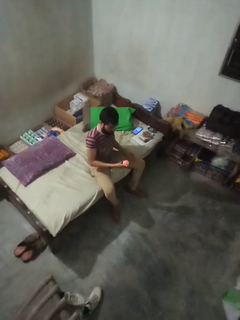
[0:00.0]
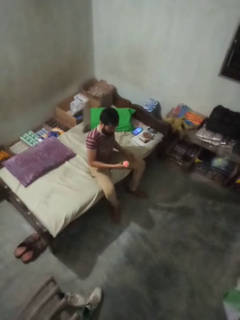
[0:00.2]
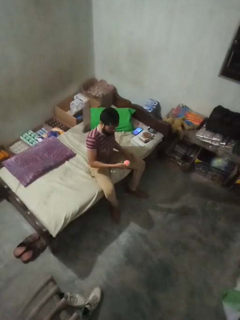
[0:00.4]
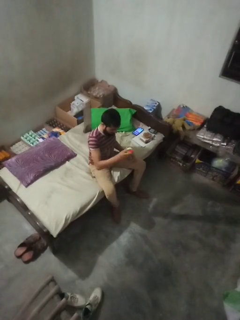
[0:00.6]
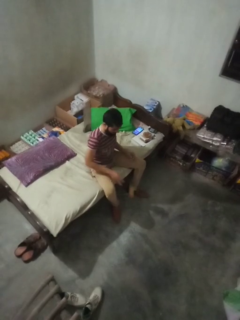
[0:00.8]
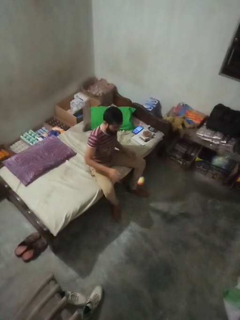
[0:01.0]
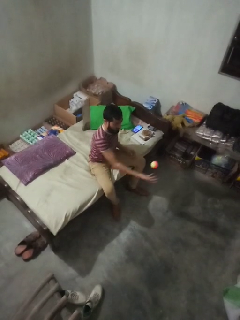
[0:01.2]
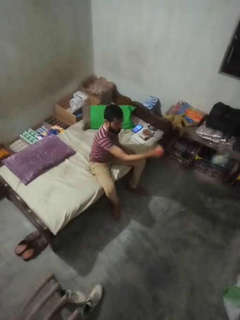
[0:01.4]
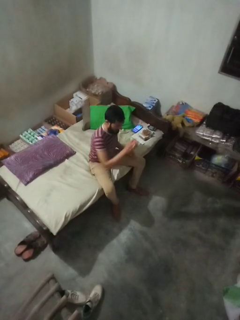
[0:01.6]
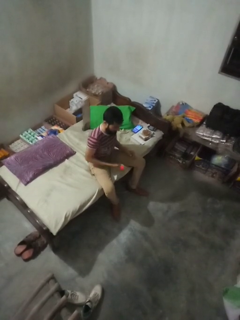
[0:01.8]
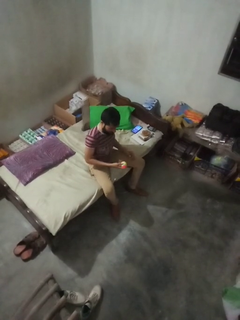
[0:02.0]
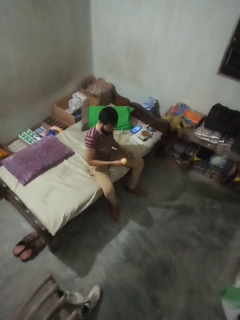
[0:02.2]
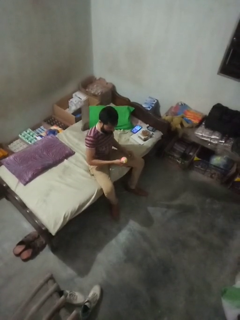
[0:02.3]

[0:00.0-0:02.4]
person bounces ball on floor

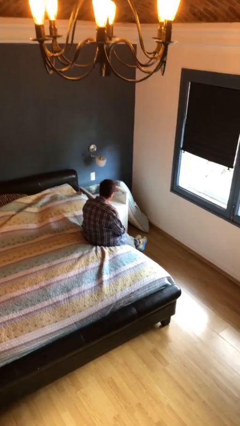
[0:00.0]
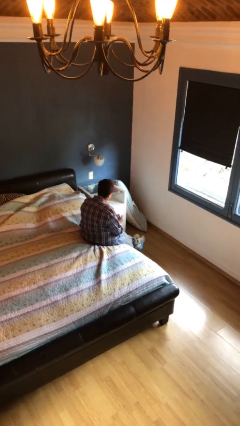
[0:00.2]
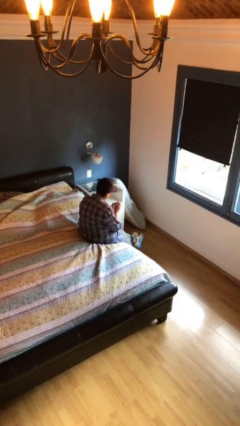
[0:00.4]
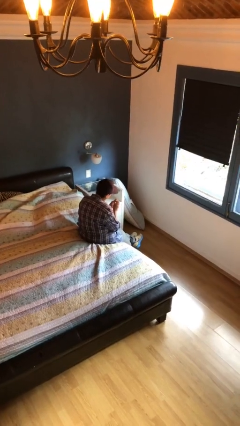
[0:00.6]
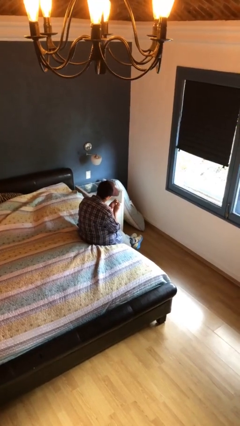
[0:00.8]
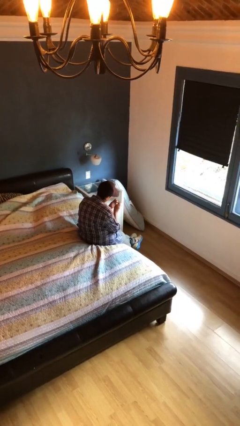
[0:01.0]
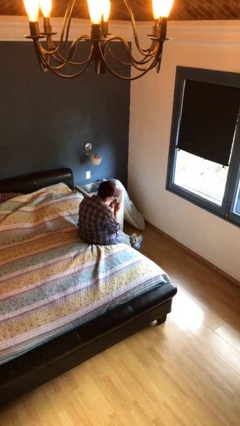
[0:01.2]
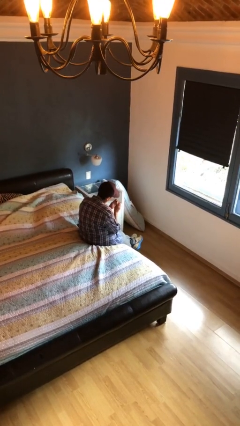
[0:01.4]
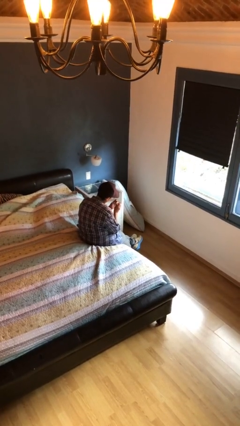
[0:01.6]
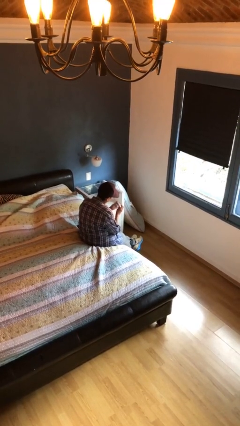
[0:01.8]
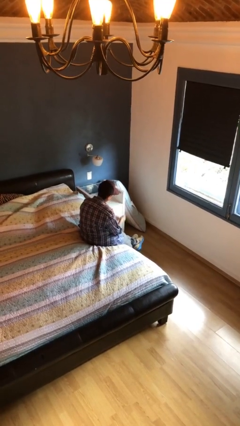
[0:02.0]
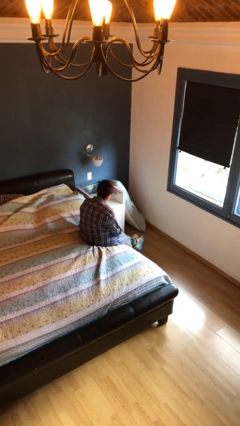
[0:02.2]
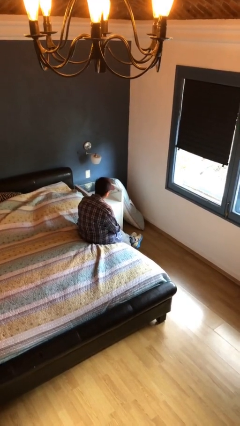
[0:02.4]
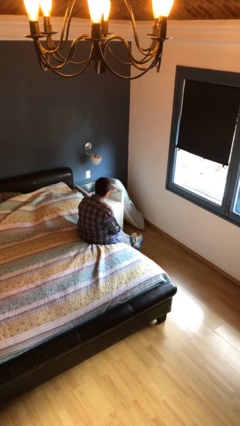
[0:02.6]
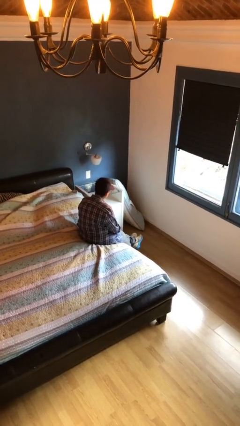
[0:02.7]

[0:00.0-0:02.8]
person clips fingernails

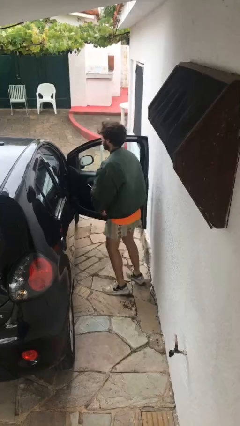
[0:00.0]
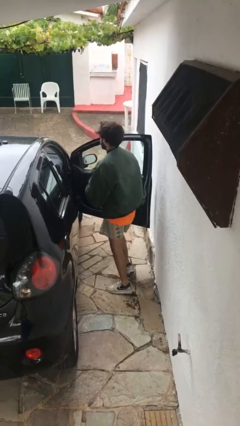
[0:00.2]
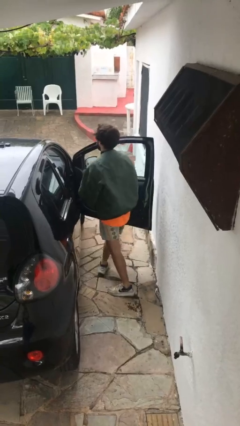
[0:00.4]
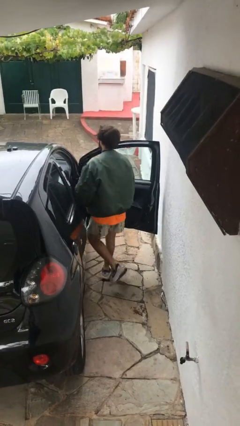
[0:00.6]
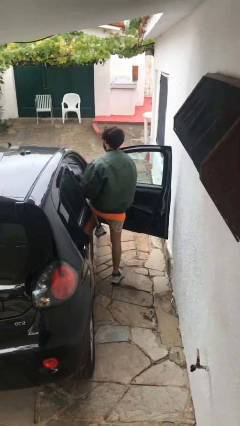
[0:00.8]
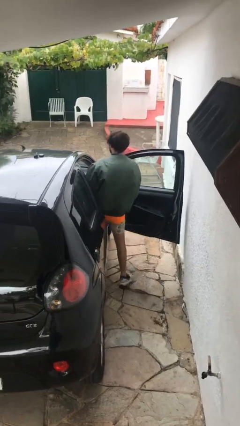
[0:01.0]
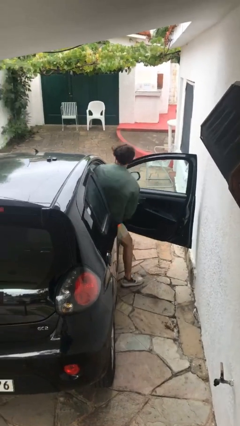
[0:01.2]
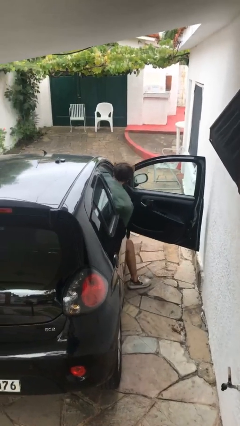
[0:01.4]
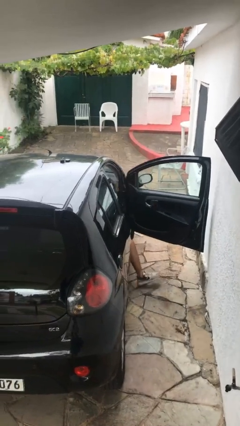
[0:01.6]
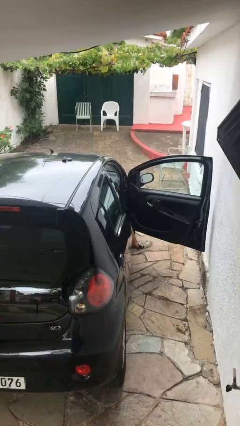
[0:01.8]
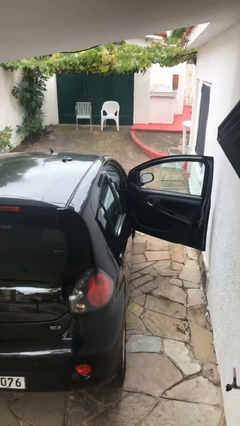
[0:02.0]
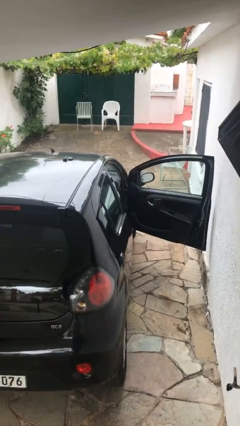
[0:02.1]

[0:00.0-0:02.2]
person enters car

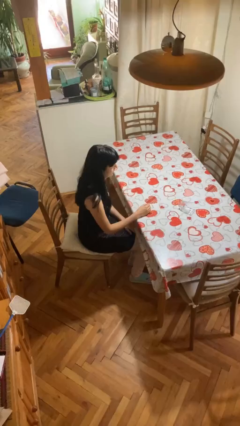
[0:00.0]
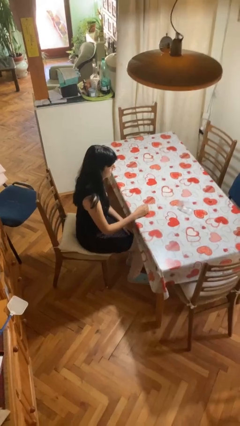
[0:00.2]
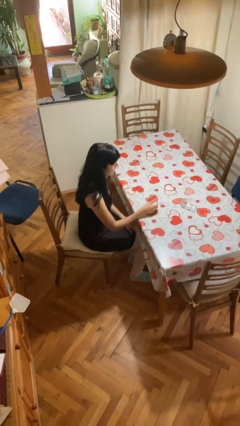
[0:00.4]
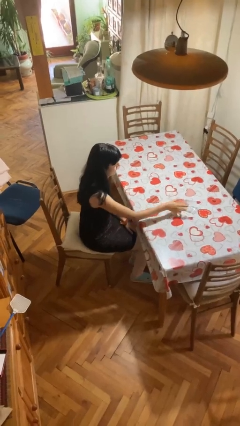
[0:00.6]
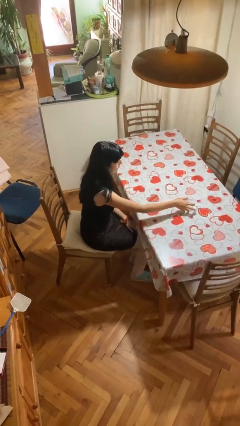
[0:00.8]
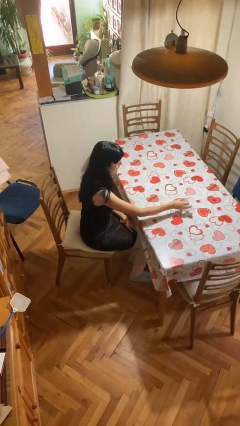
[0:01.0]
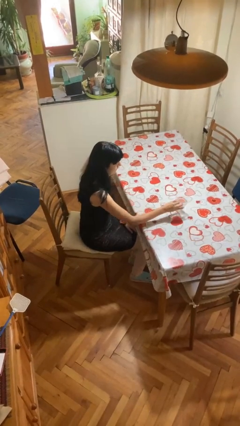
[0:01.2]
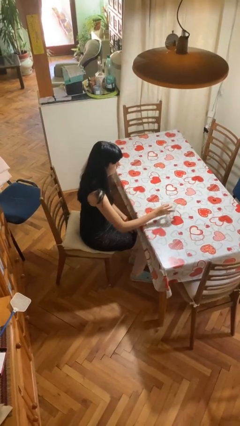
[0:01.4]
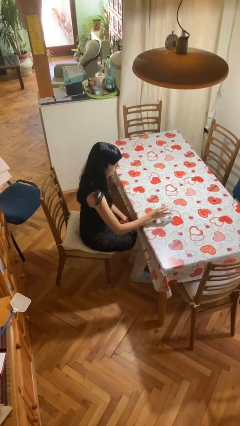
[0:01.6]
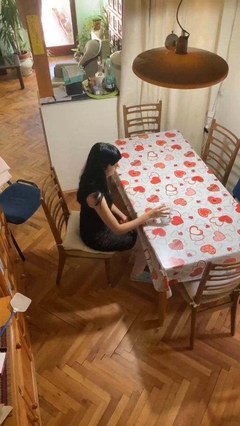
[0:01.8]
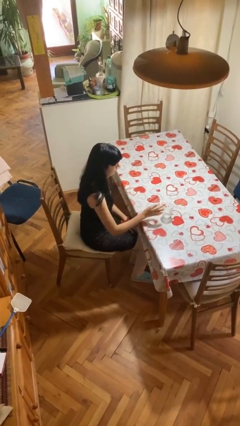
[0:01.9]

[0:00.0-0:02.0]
person sets upright glass

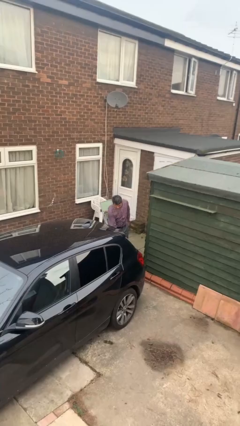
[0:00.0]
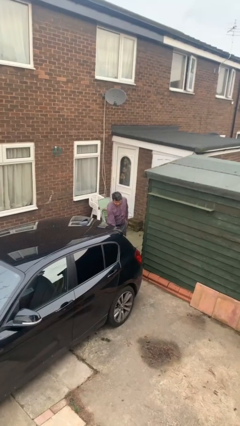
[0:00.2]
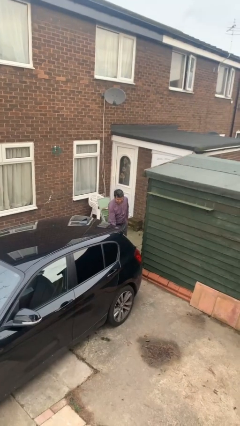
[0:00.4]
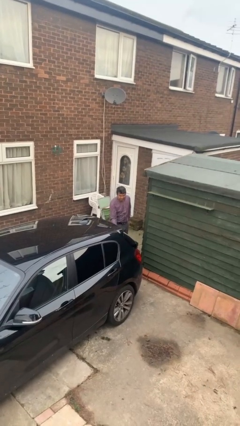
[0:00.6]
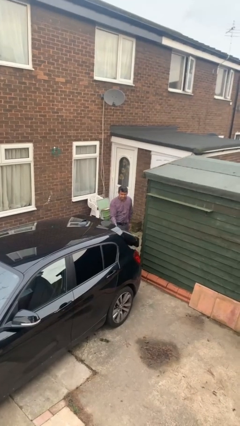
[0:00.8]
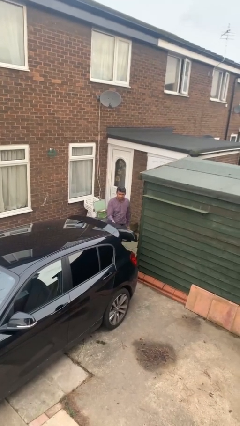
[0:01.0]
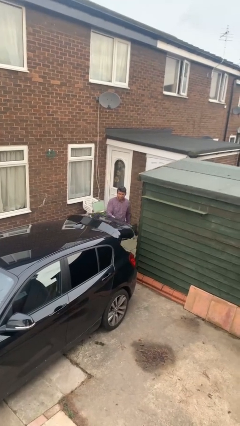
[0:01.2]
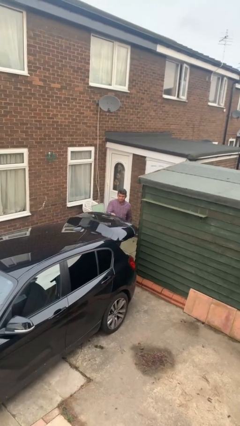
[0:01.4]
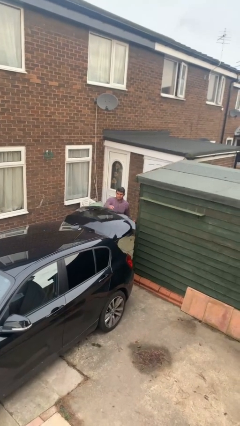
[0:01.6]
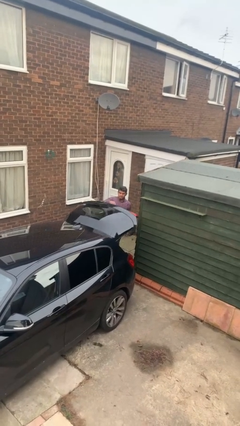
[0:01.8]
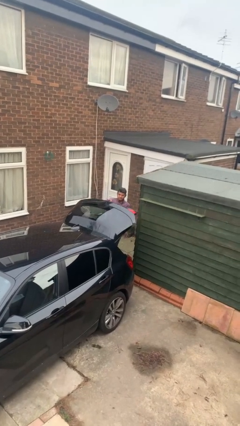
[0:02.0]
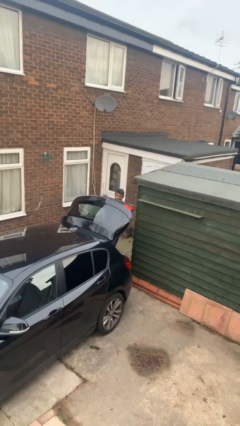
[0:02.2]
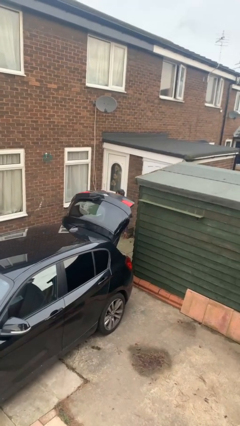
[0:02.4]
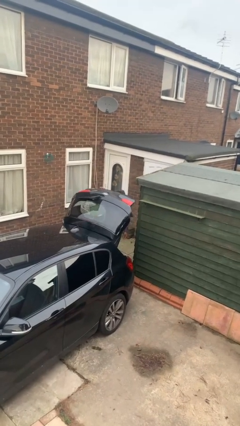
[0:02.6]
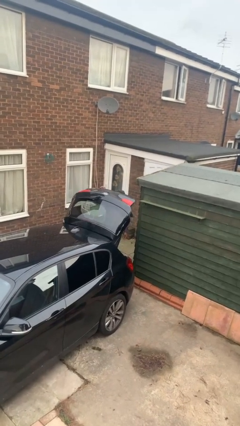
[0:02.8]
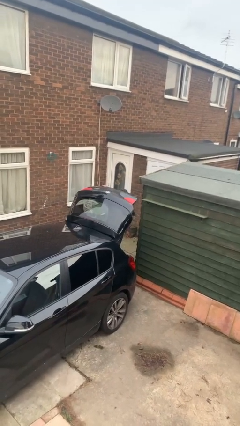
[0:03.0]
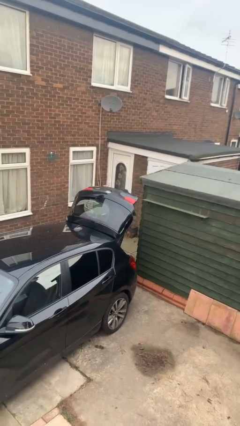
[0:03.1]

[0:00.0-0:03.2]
person opens car trunk

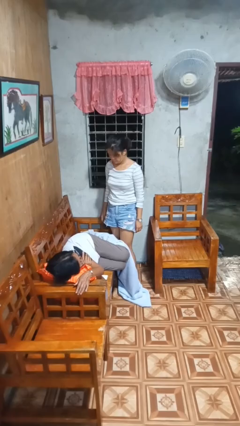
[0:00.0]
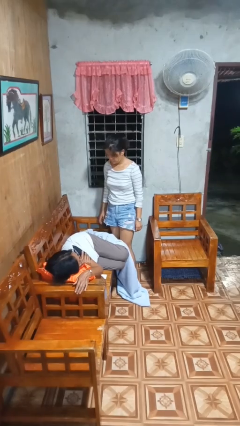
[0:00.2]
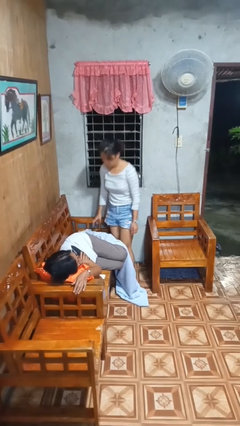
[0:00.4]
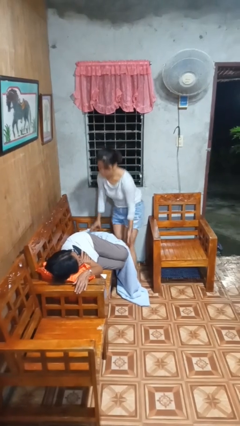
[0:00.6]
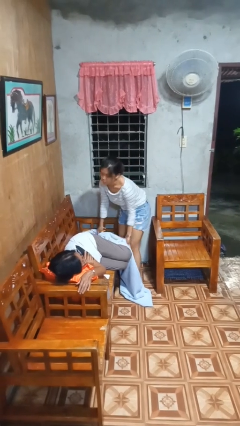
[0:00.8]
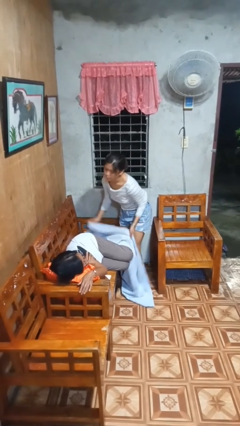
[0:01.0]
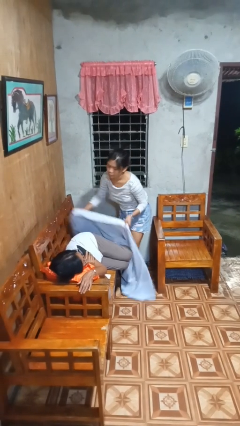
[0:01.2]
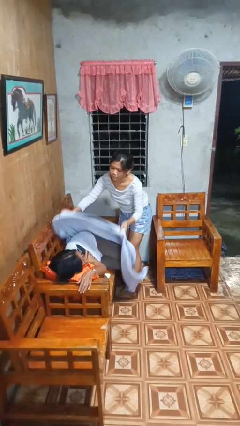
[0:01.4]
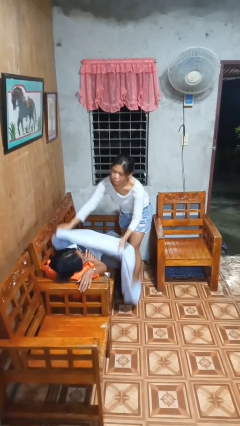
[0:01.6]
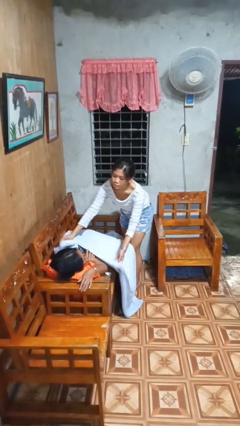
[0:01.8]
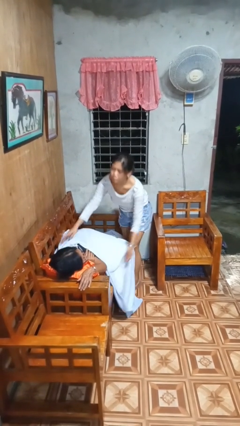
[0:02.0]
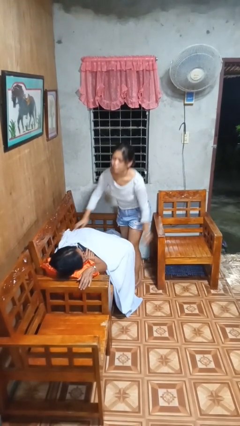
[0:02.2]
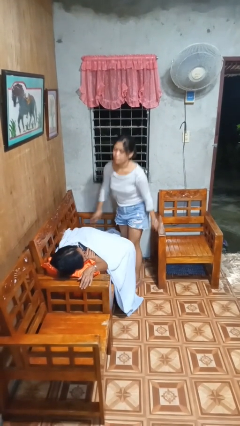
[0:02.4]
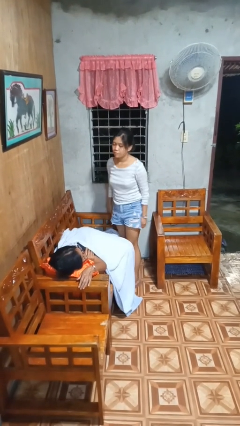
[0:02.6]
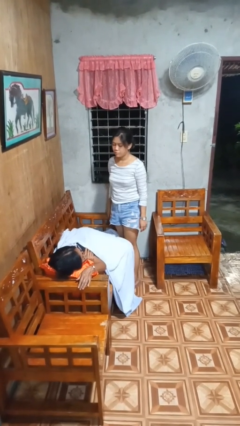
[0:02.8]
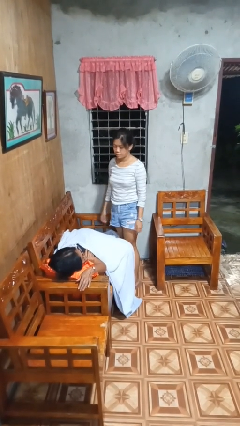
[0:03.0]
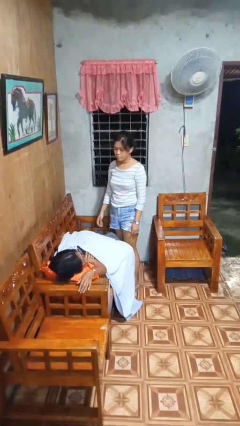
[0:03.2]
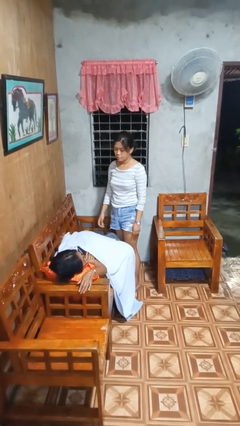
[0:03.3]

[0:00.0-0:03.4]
person covers friend with blanket

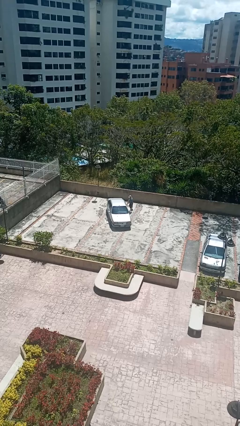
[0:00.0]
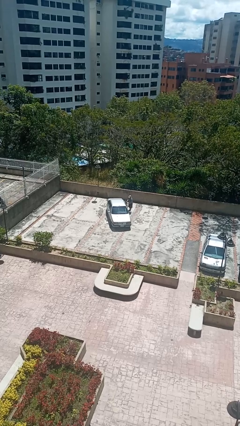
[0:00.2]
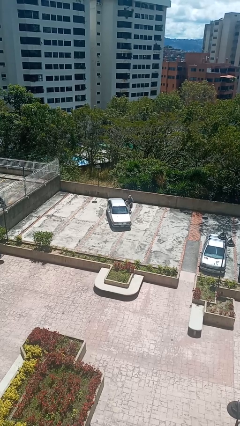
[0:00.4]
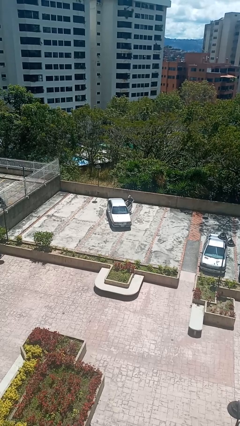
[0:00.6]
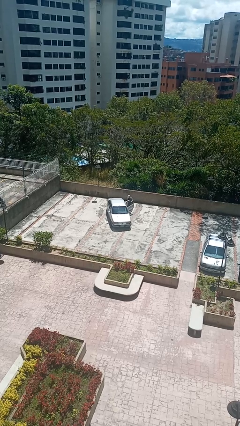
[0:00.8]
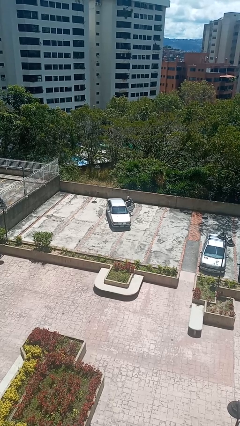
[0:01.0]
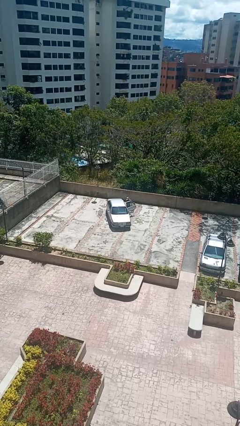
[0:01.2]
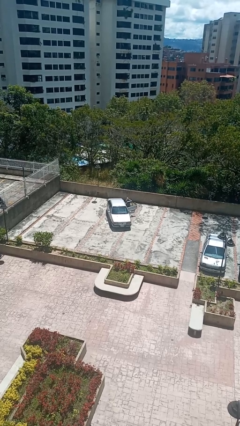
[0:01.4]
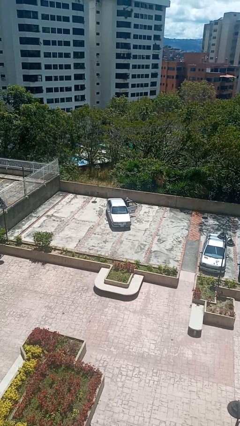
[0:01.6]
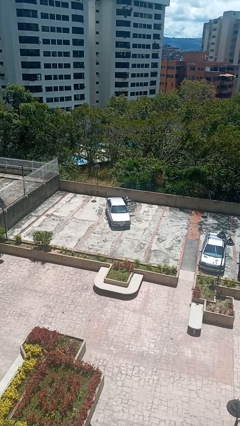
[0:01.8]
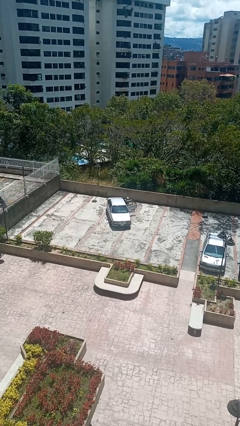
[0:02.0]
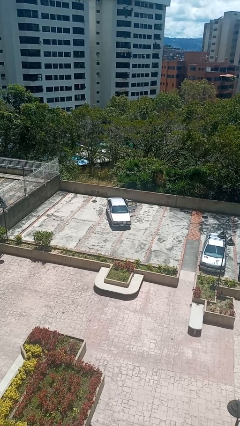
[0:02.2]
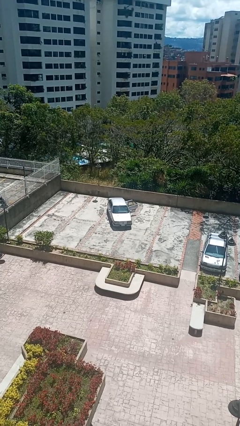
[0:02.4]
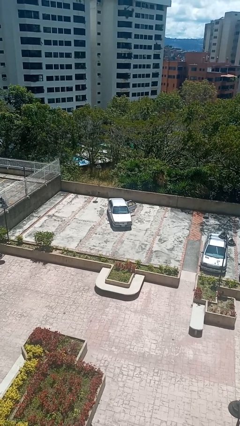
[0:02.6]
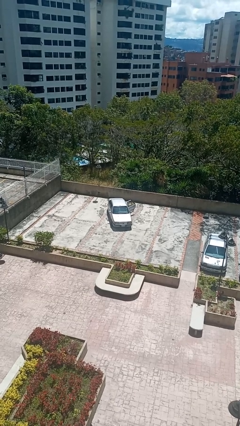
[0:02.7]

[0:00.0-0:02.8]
car picks up person
